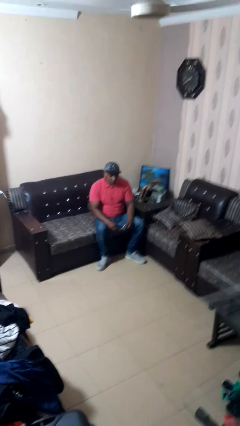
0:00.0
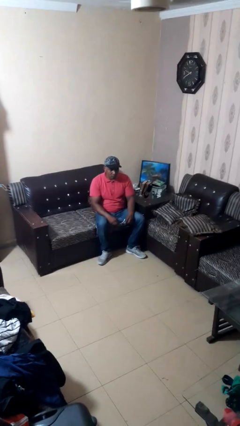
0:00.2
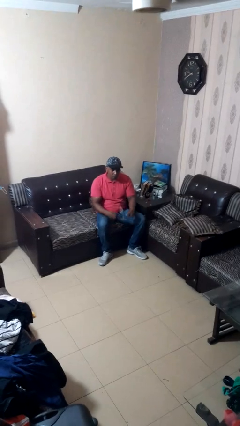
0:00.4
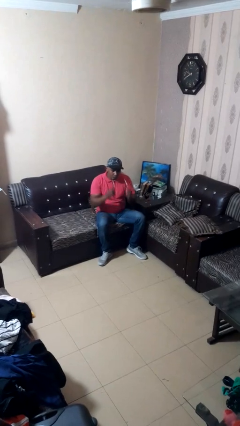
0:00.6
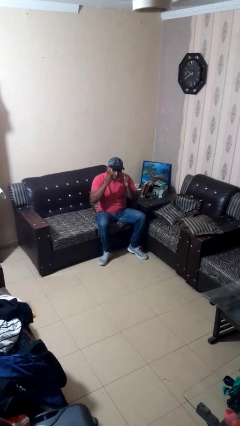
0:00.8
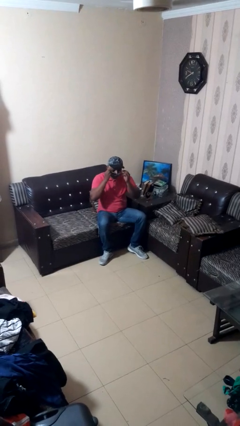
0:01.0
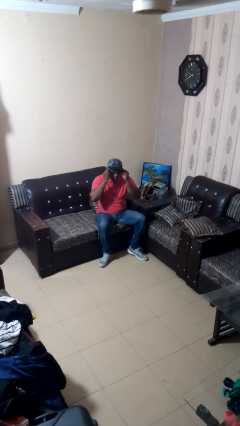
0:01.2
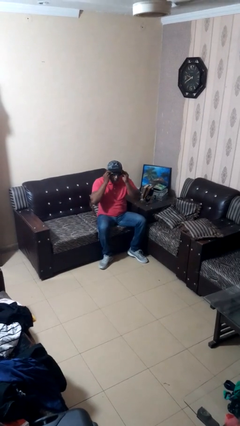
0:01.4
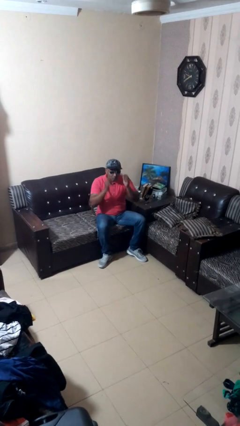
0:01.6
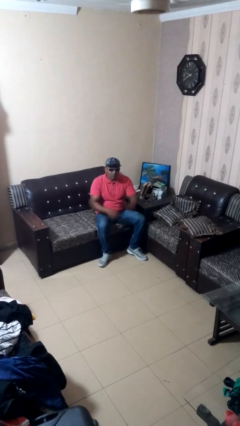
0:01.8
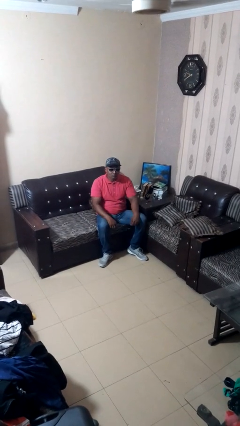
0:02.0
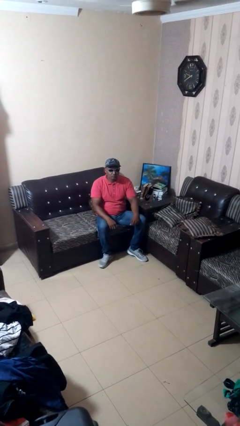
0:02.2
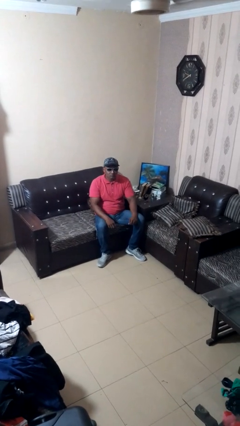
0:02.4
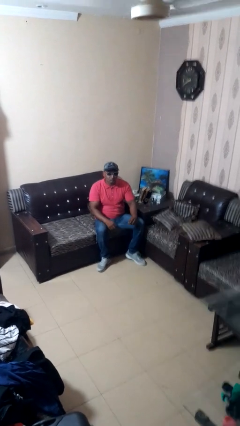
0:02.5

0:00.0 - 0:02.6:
person puts on sunglasses

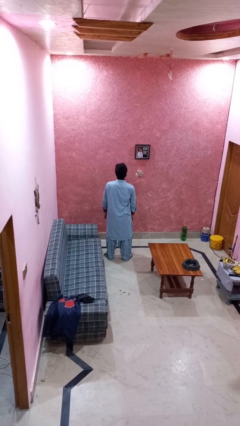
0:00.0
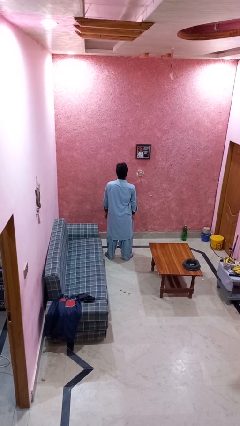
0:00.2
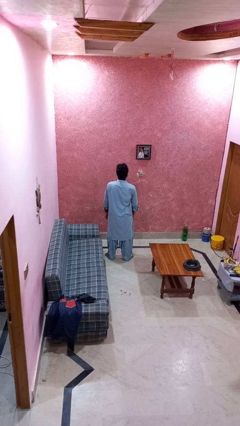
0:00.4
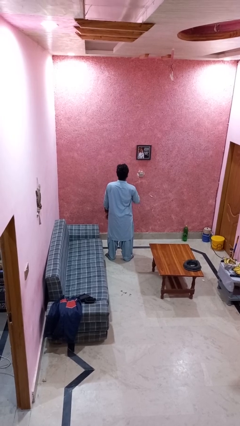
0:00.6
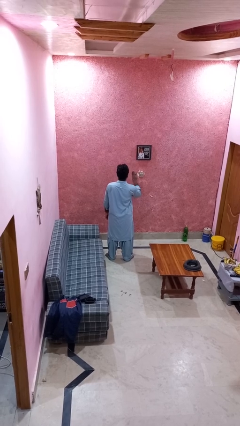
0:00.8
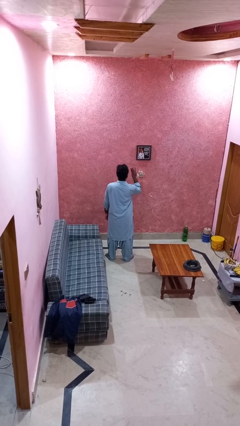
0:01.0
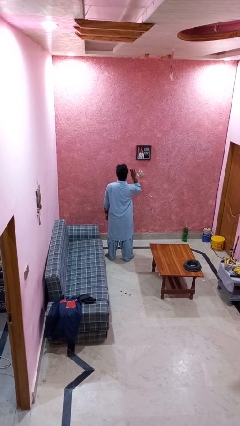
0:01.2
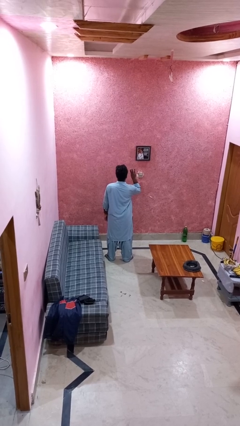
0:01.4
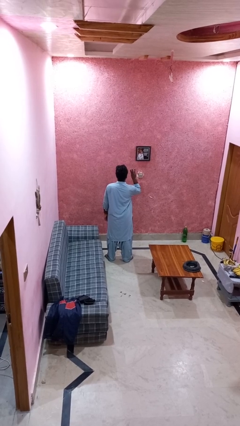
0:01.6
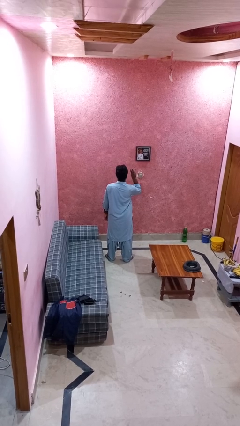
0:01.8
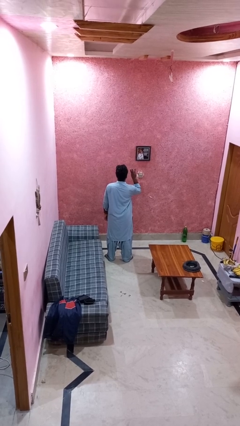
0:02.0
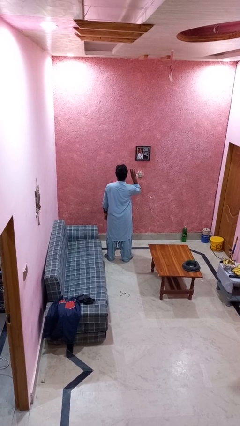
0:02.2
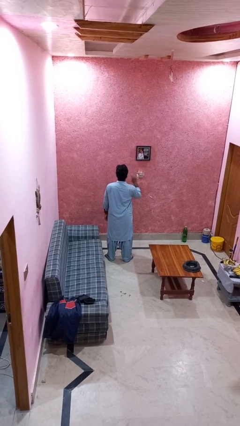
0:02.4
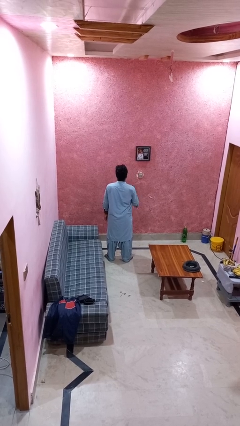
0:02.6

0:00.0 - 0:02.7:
person gestures number three

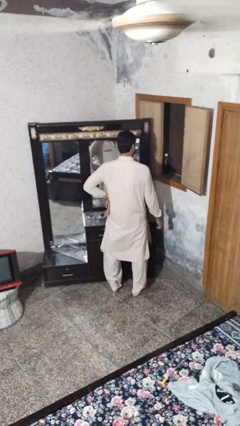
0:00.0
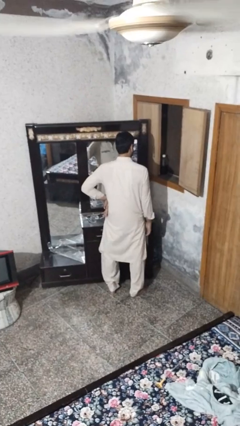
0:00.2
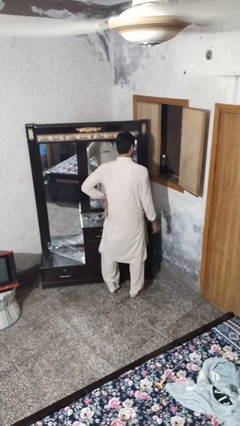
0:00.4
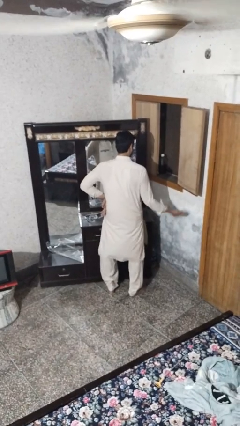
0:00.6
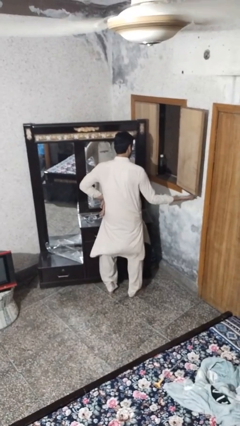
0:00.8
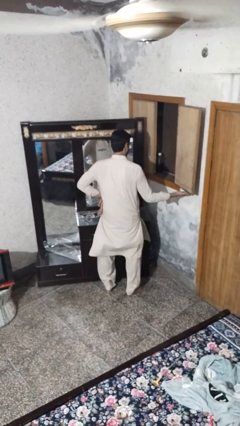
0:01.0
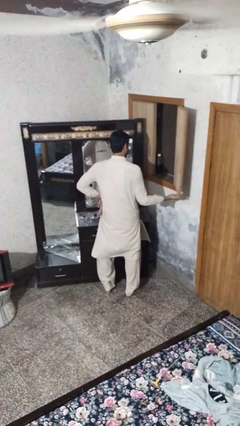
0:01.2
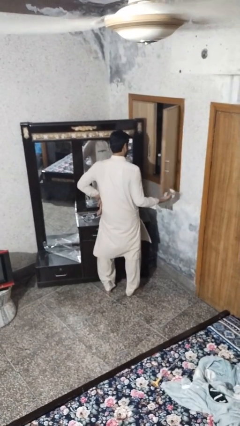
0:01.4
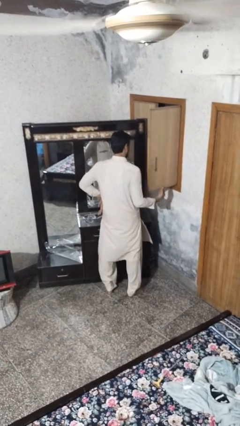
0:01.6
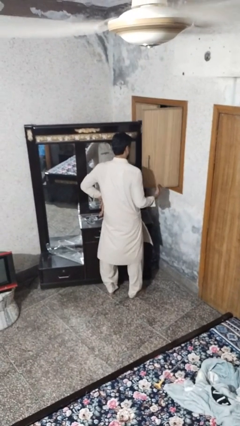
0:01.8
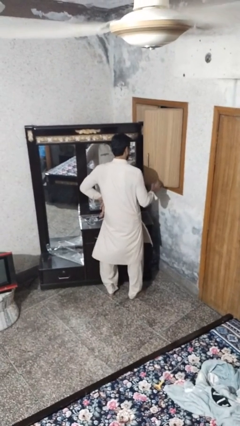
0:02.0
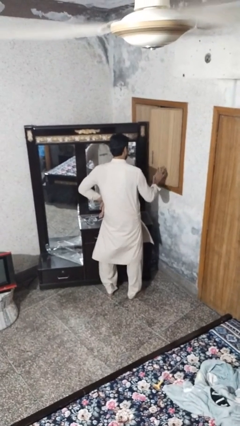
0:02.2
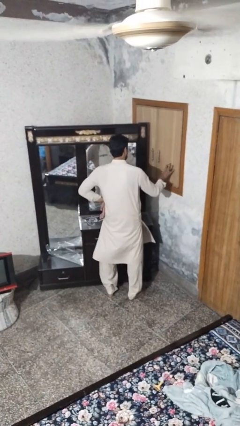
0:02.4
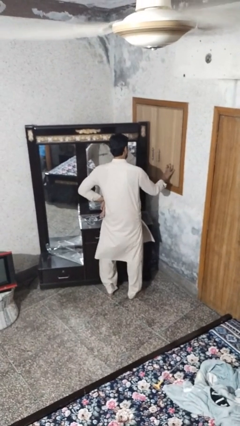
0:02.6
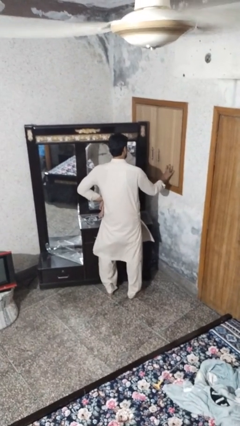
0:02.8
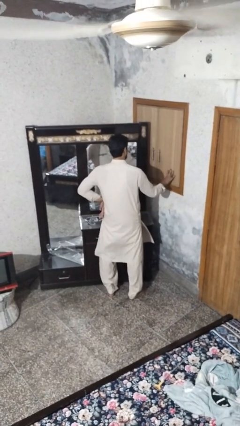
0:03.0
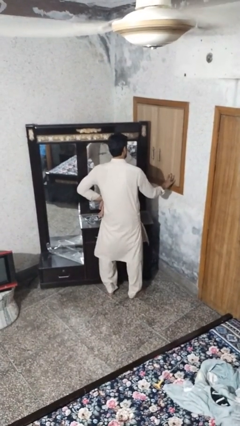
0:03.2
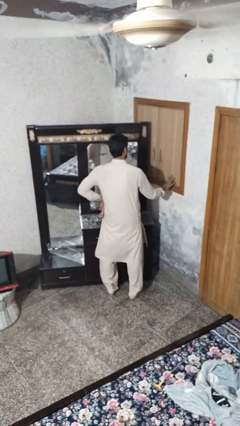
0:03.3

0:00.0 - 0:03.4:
person closes home window

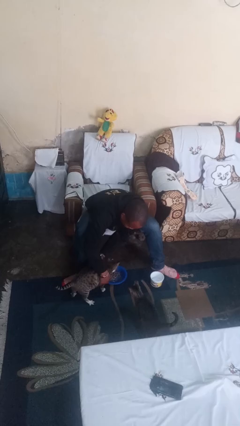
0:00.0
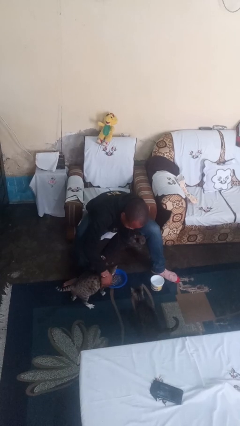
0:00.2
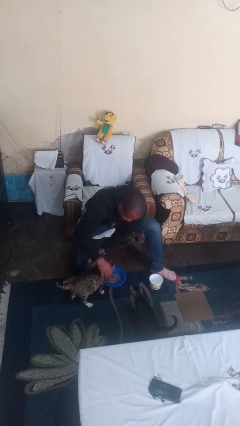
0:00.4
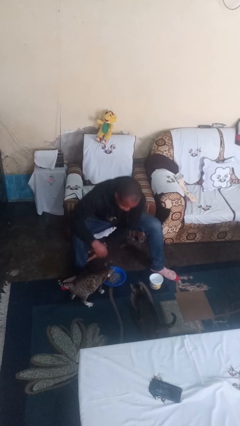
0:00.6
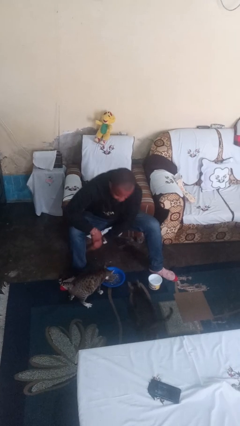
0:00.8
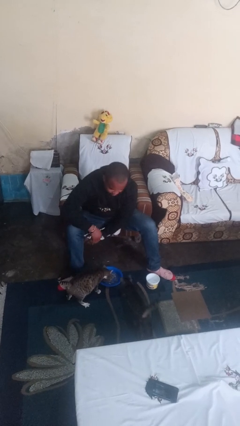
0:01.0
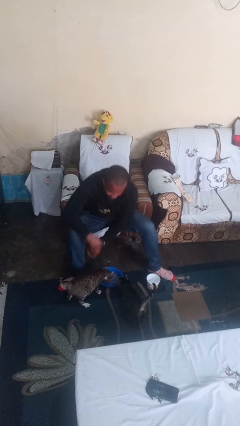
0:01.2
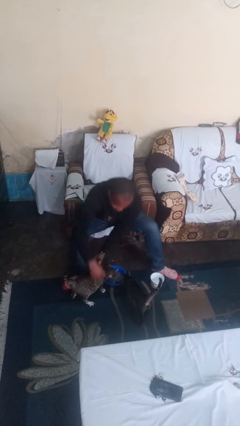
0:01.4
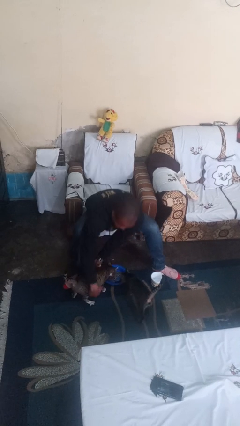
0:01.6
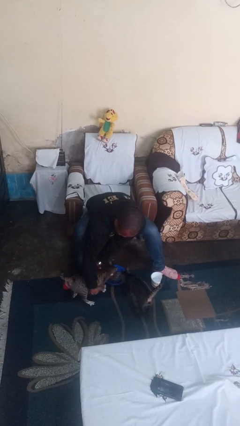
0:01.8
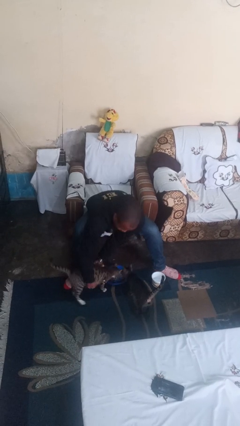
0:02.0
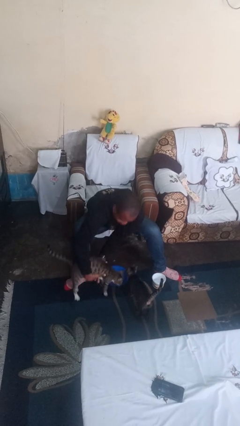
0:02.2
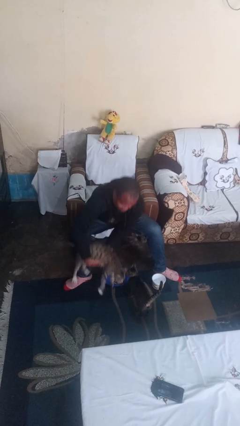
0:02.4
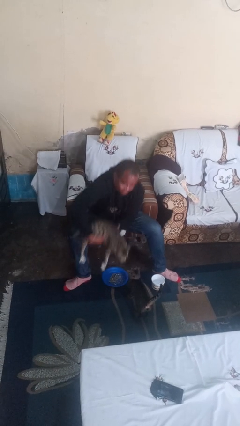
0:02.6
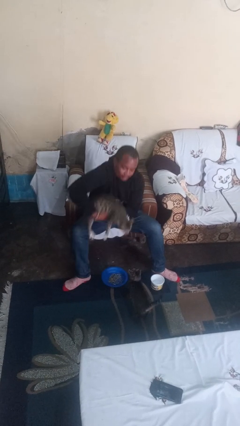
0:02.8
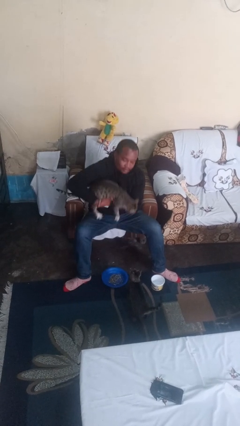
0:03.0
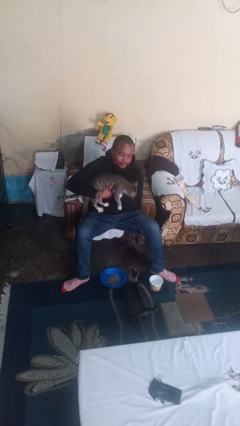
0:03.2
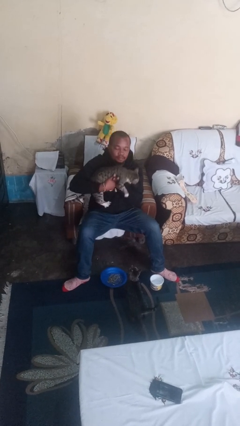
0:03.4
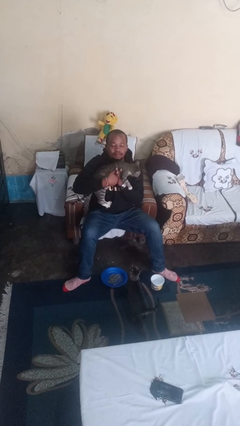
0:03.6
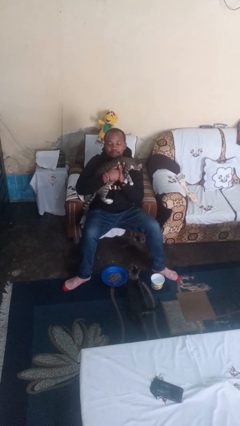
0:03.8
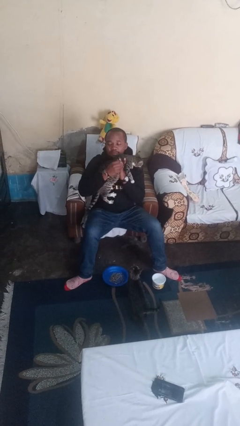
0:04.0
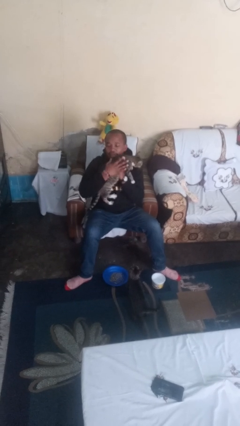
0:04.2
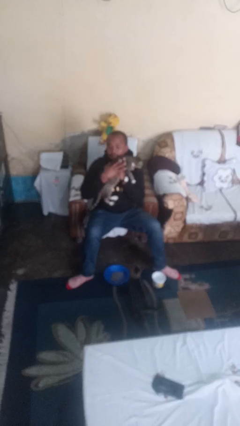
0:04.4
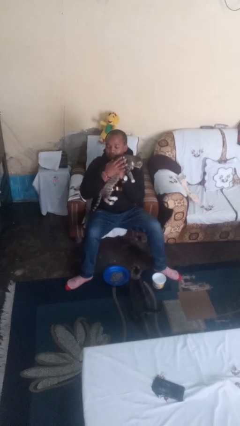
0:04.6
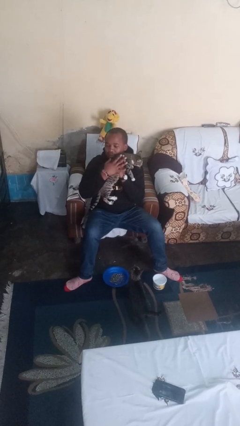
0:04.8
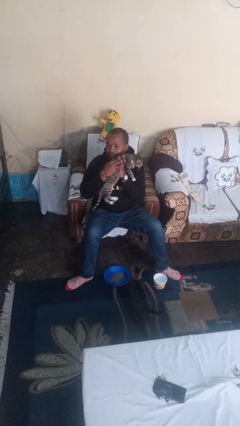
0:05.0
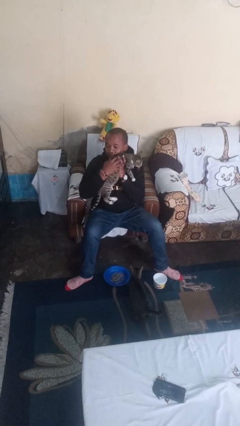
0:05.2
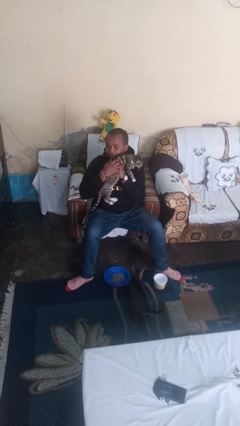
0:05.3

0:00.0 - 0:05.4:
person hugs cat

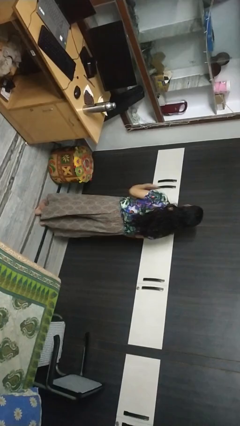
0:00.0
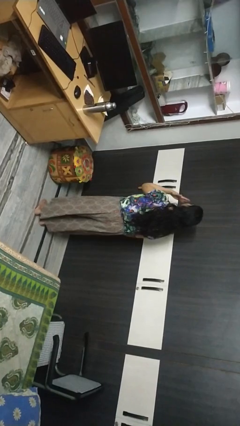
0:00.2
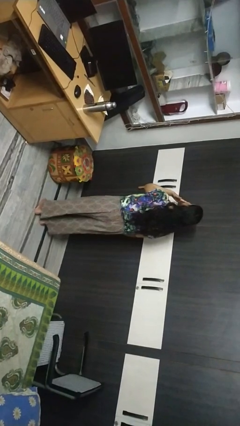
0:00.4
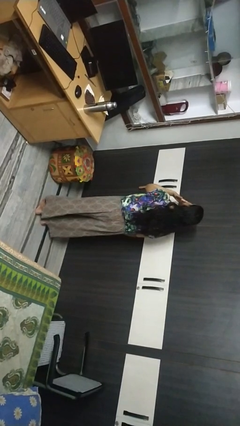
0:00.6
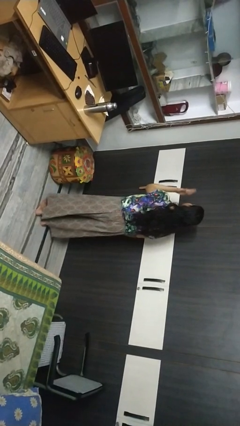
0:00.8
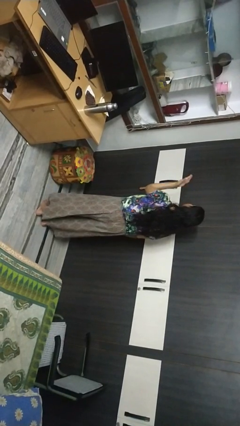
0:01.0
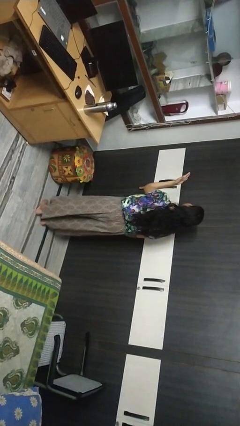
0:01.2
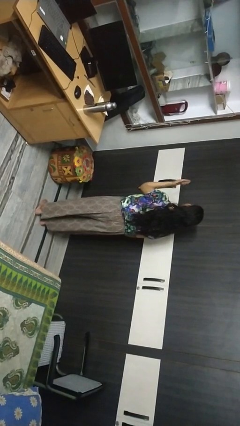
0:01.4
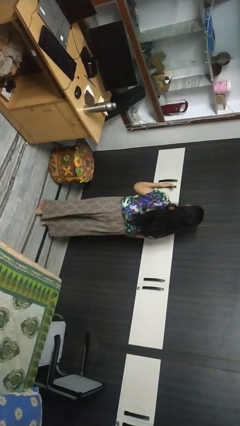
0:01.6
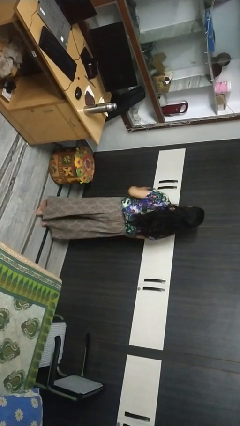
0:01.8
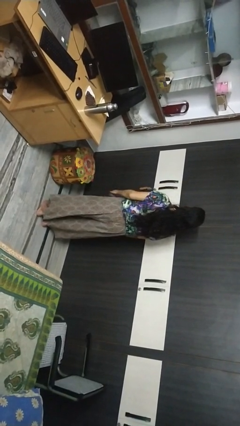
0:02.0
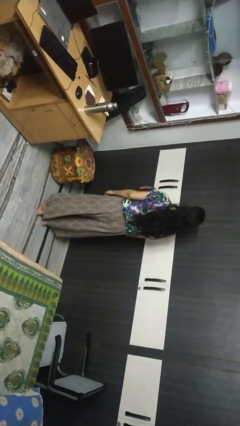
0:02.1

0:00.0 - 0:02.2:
person gestures blow kiss

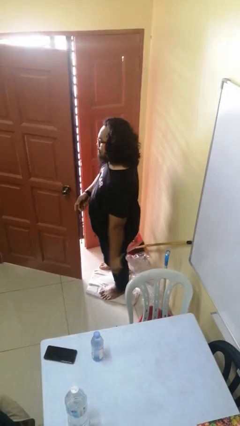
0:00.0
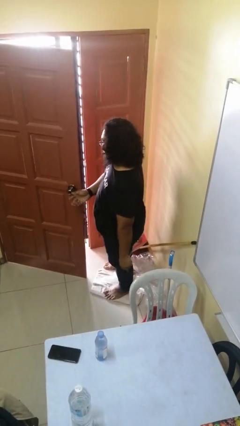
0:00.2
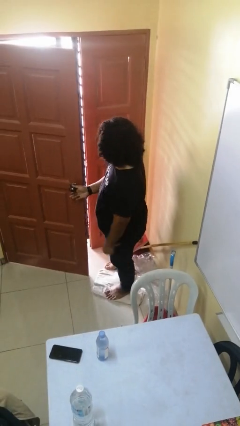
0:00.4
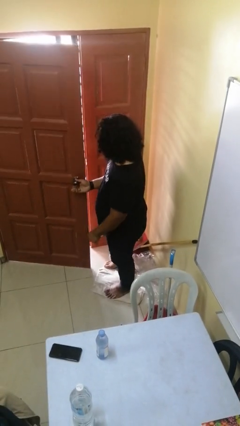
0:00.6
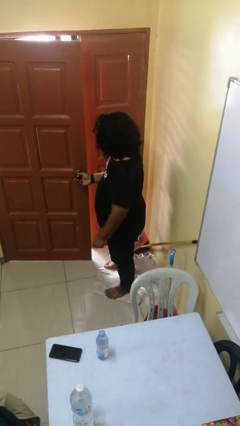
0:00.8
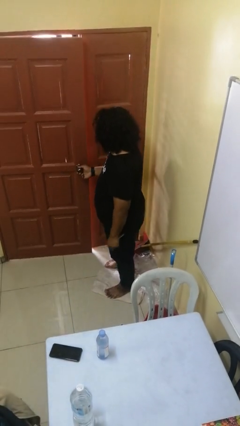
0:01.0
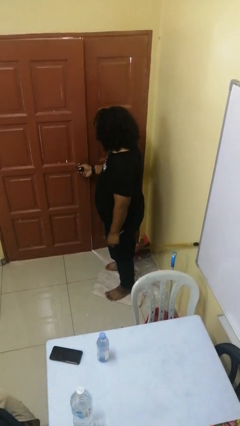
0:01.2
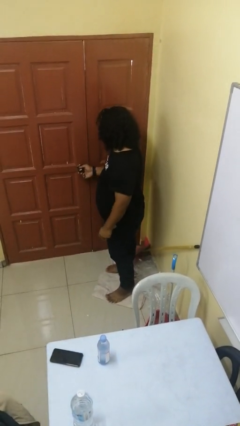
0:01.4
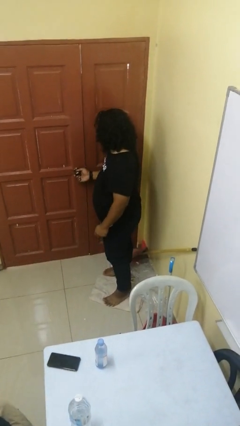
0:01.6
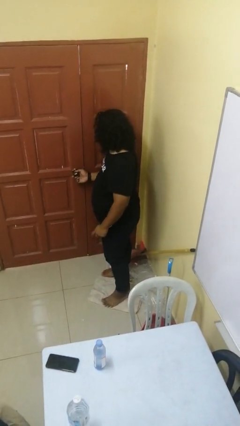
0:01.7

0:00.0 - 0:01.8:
person closes facility door
